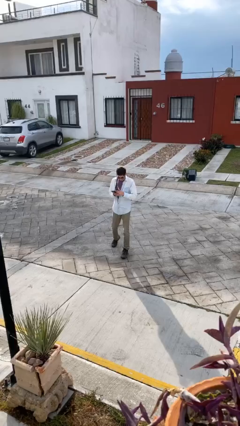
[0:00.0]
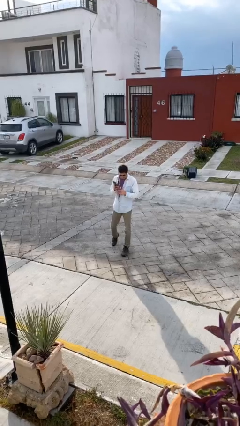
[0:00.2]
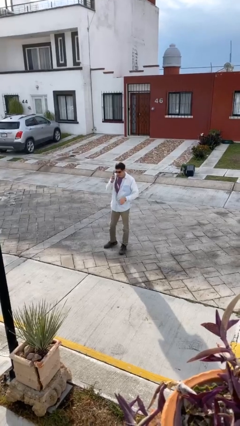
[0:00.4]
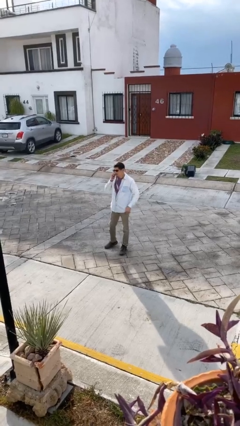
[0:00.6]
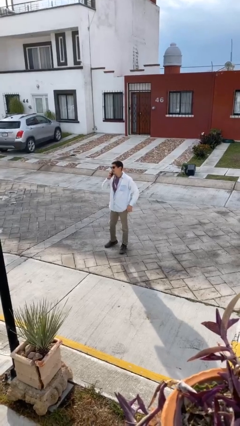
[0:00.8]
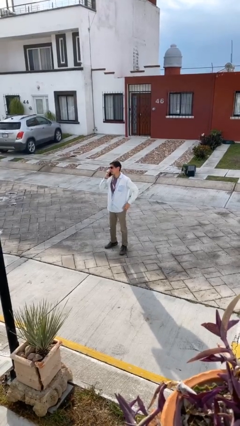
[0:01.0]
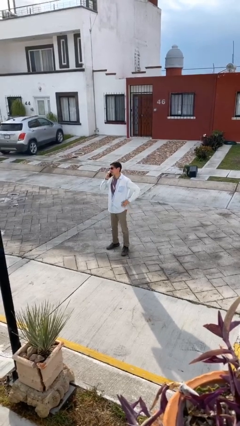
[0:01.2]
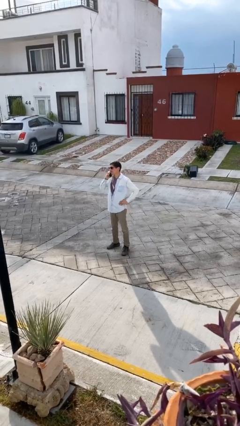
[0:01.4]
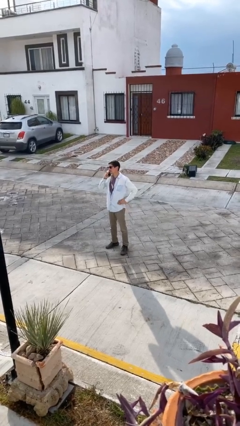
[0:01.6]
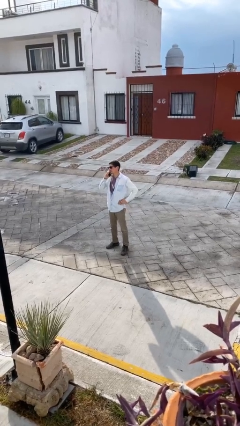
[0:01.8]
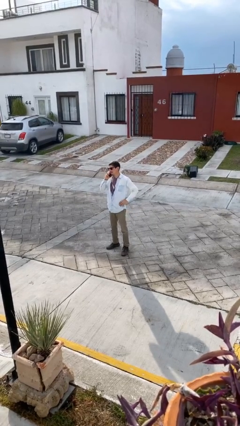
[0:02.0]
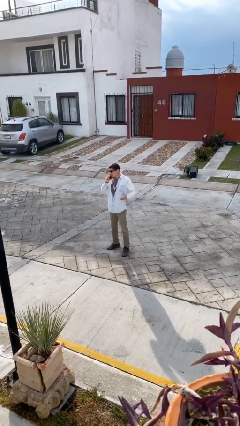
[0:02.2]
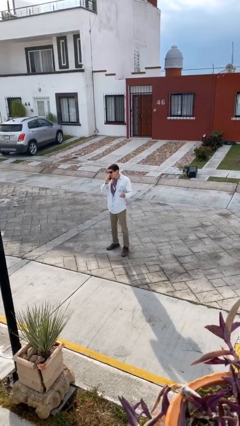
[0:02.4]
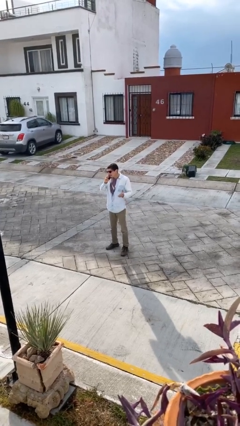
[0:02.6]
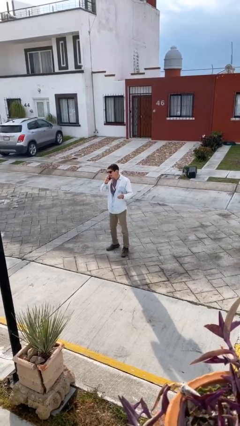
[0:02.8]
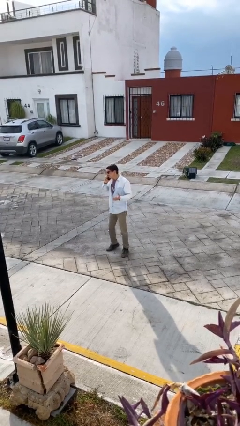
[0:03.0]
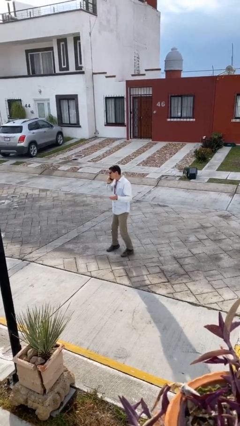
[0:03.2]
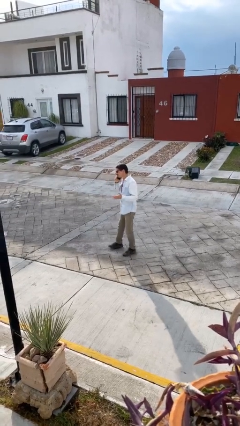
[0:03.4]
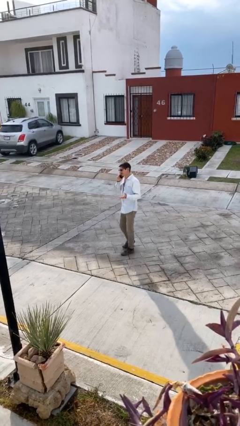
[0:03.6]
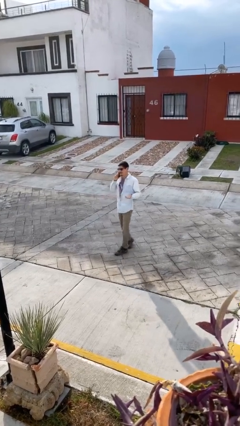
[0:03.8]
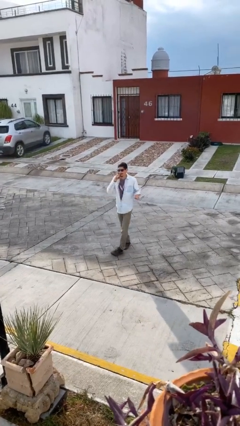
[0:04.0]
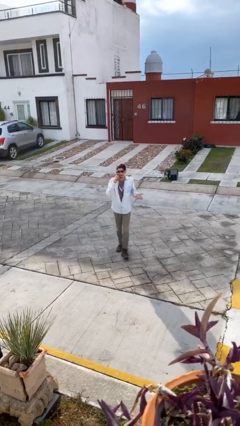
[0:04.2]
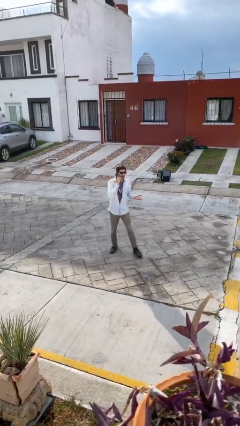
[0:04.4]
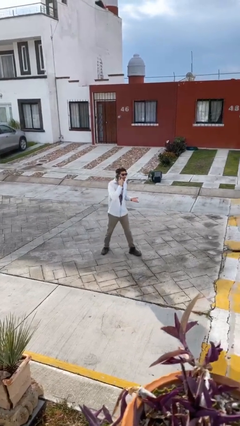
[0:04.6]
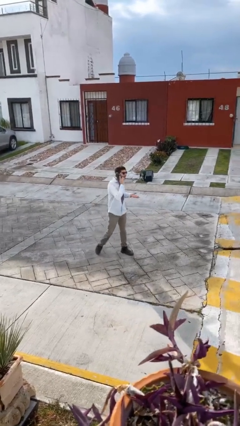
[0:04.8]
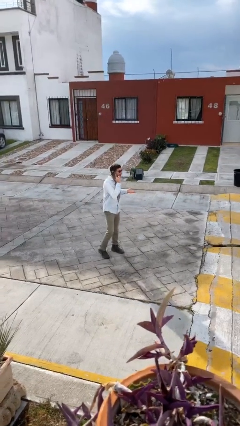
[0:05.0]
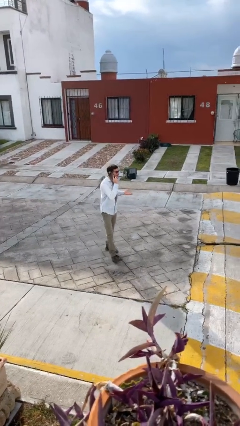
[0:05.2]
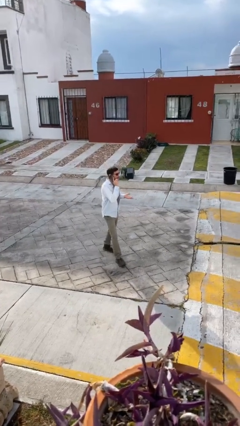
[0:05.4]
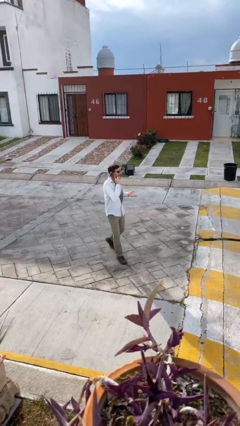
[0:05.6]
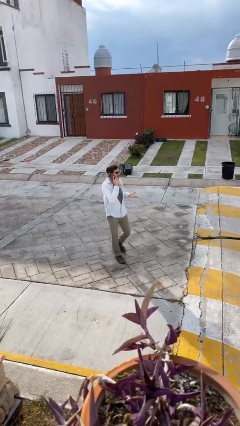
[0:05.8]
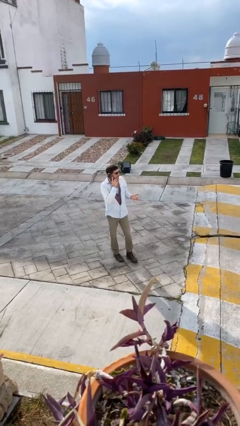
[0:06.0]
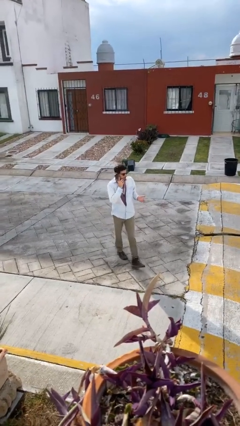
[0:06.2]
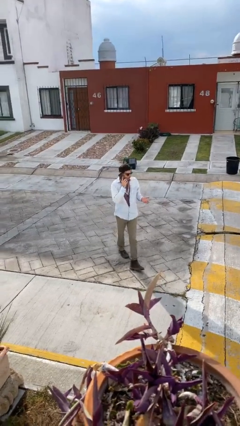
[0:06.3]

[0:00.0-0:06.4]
person talks on phone

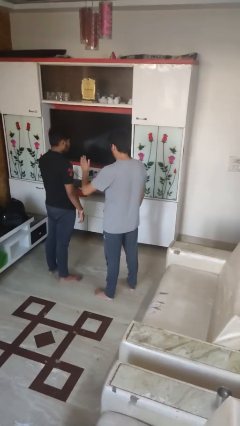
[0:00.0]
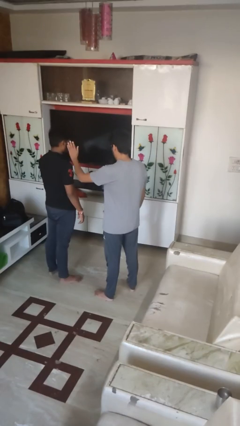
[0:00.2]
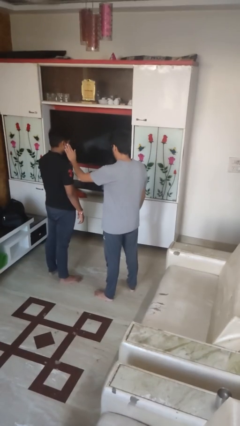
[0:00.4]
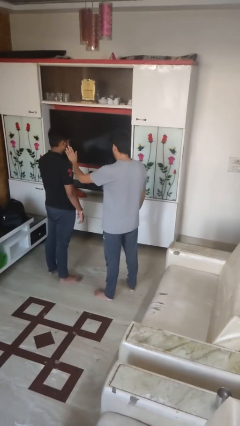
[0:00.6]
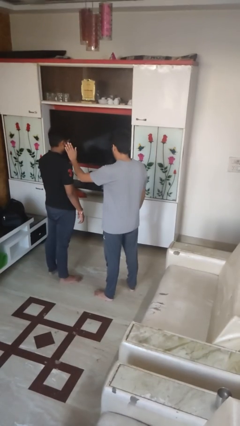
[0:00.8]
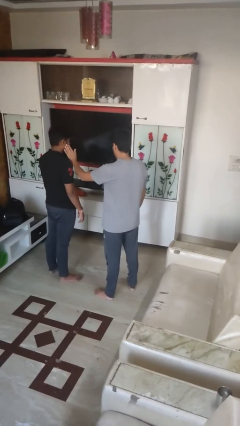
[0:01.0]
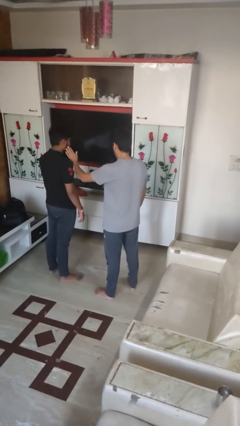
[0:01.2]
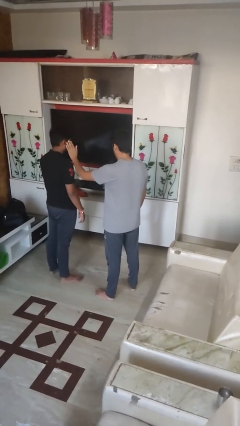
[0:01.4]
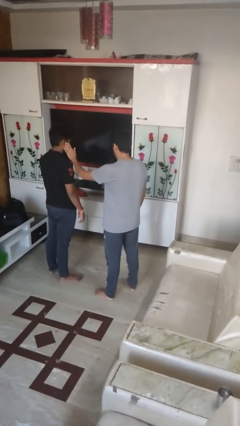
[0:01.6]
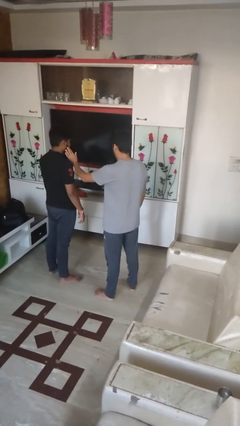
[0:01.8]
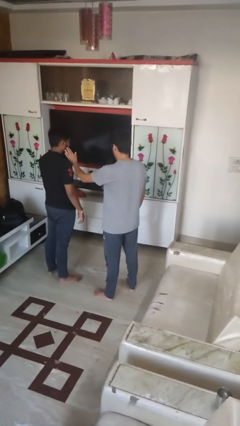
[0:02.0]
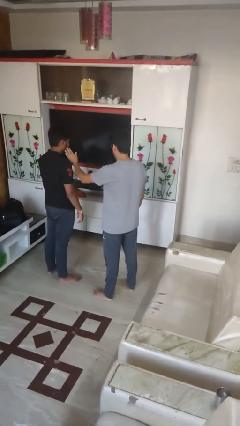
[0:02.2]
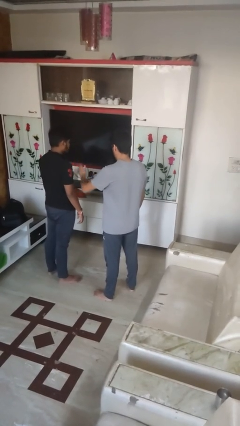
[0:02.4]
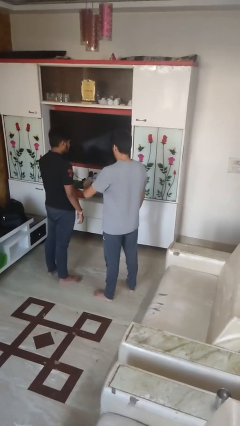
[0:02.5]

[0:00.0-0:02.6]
person touches face of person

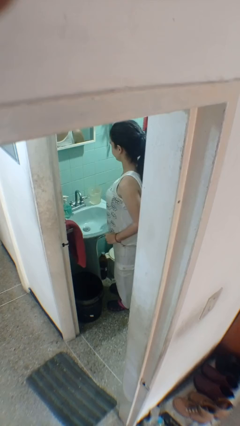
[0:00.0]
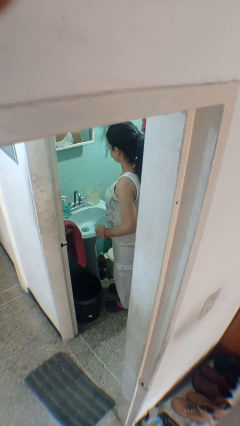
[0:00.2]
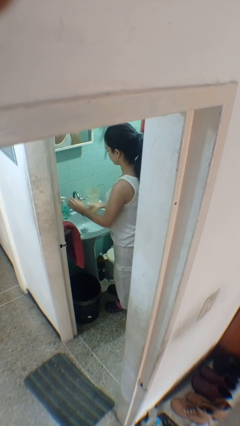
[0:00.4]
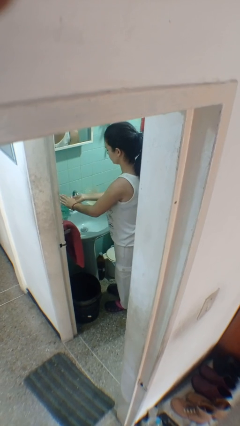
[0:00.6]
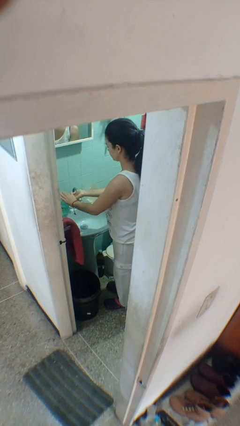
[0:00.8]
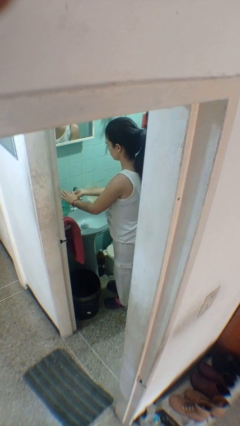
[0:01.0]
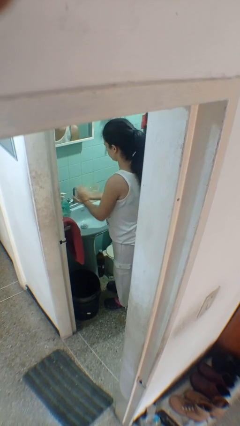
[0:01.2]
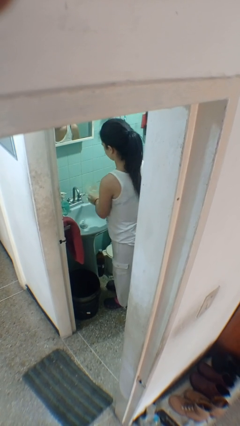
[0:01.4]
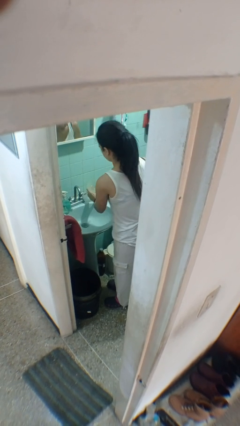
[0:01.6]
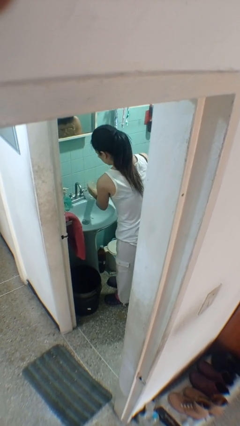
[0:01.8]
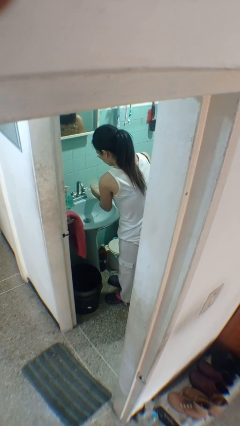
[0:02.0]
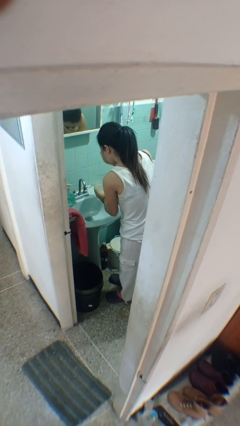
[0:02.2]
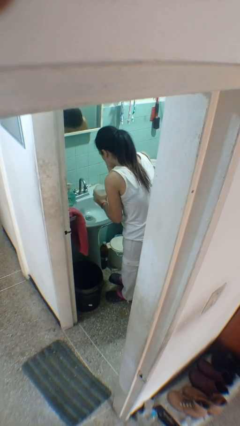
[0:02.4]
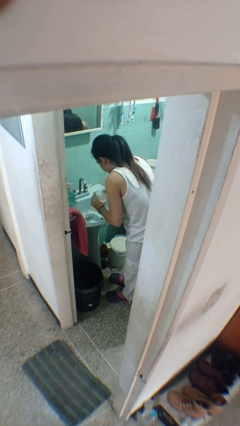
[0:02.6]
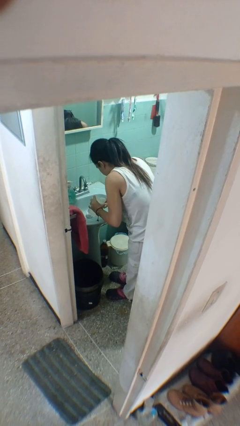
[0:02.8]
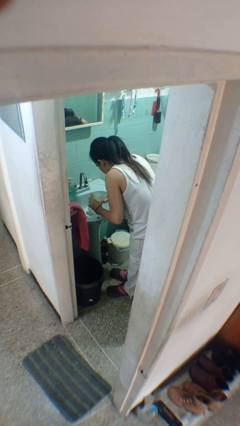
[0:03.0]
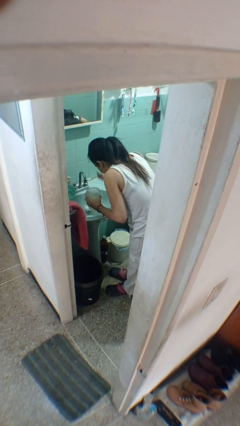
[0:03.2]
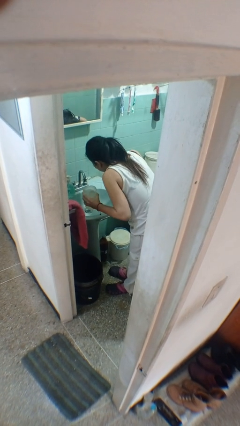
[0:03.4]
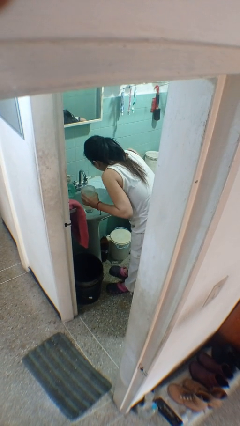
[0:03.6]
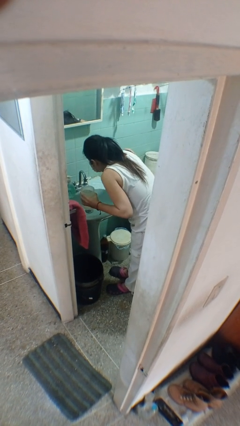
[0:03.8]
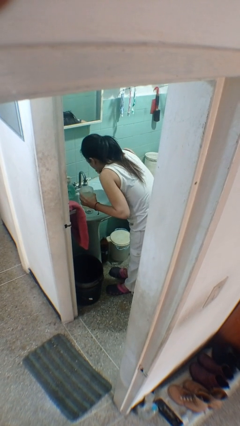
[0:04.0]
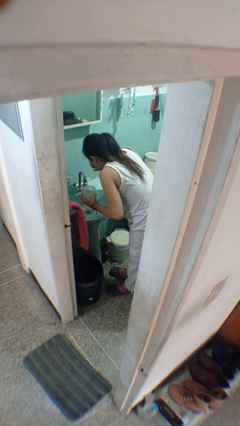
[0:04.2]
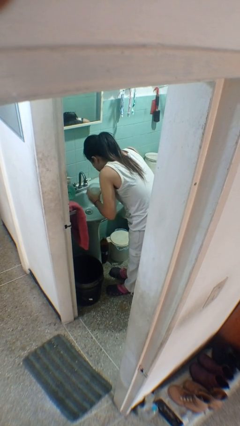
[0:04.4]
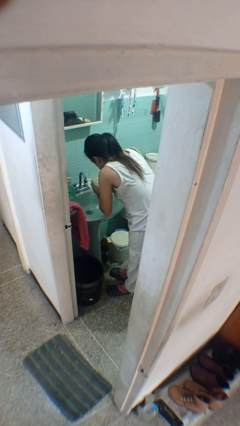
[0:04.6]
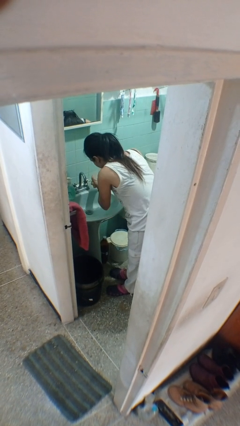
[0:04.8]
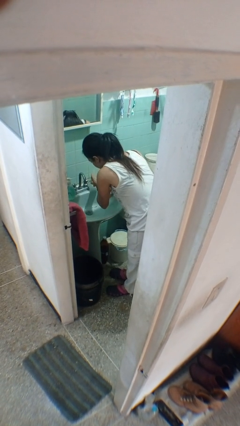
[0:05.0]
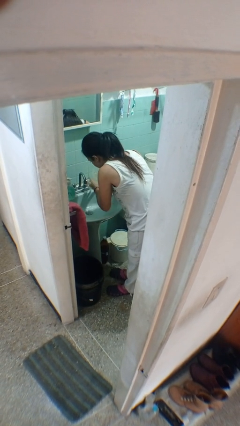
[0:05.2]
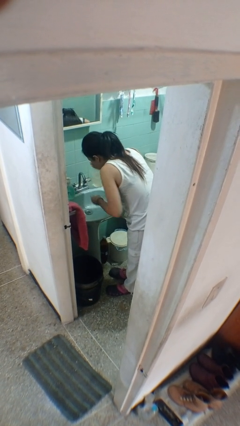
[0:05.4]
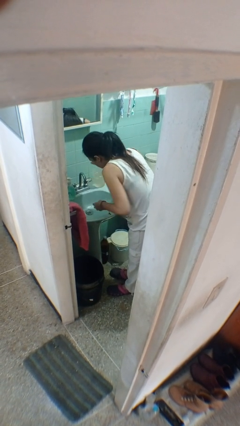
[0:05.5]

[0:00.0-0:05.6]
person washes face

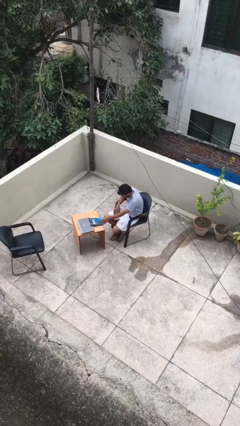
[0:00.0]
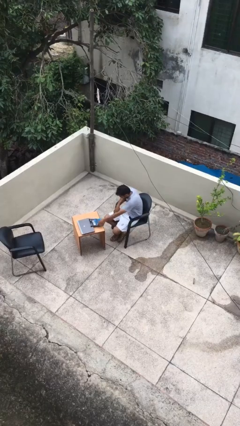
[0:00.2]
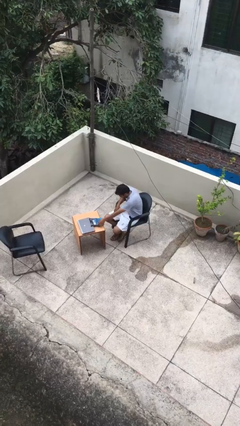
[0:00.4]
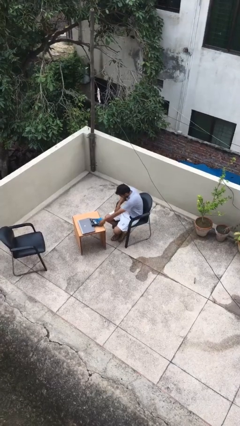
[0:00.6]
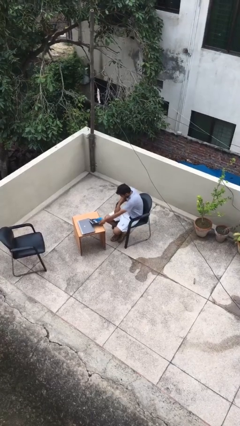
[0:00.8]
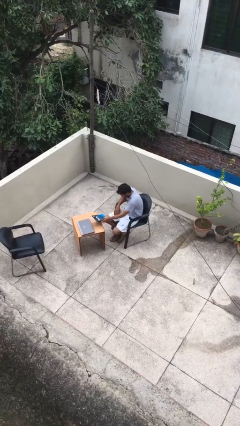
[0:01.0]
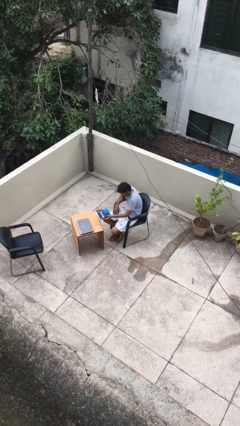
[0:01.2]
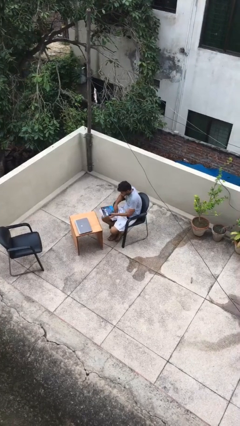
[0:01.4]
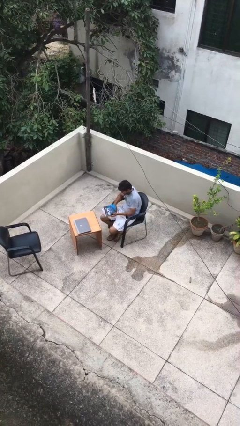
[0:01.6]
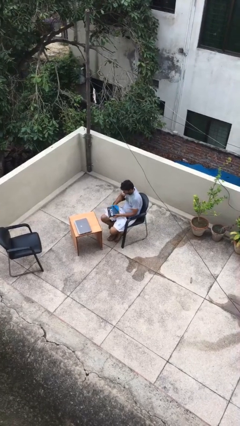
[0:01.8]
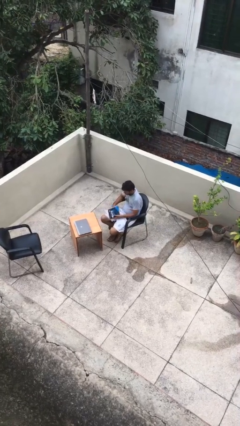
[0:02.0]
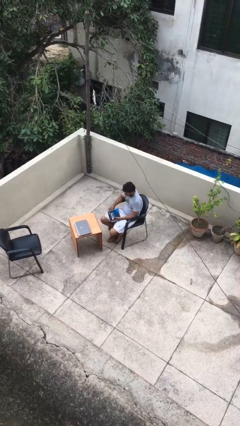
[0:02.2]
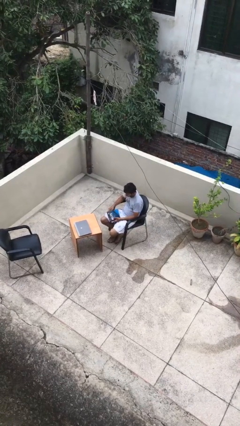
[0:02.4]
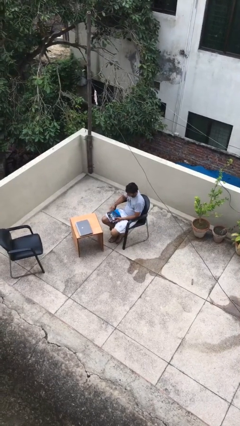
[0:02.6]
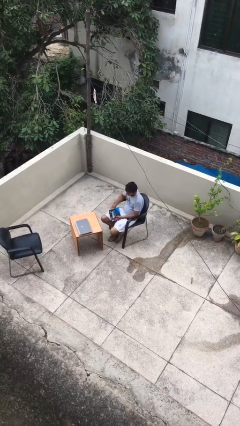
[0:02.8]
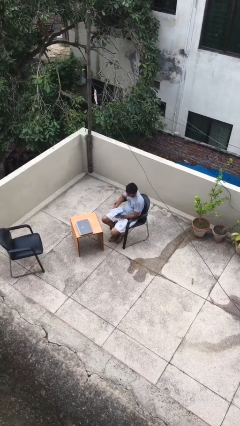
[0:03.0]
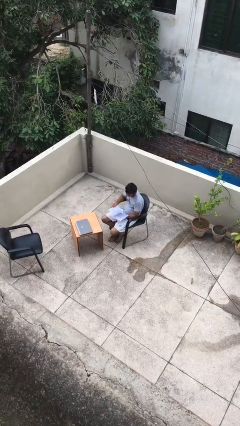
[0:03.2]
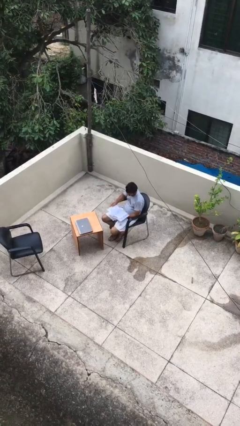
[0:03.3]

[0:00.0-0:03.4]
person picks up object from table
